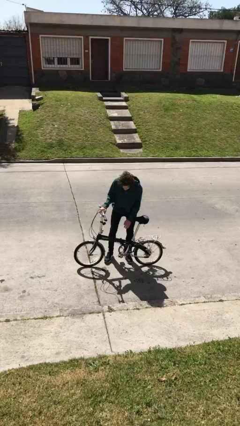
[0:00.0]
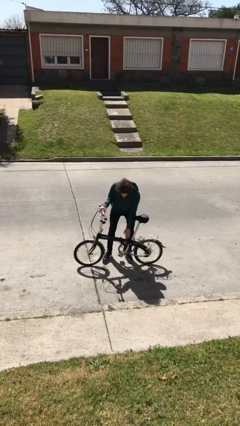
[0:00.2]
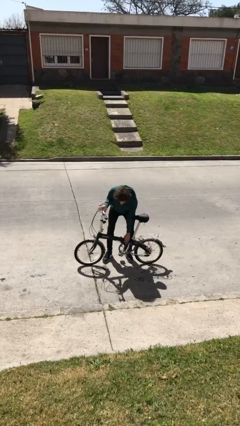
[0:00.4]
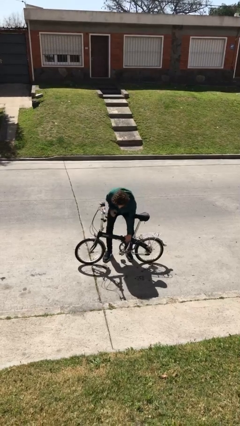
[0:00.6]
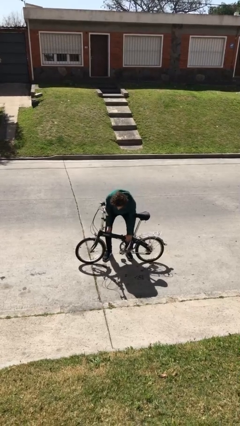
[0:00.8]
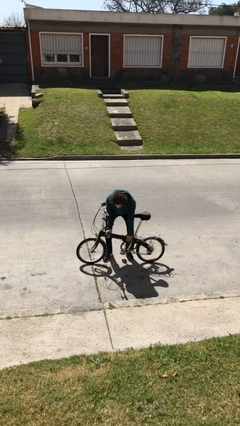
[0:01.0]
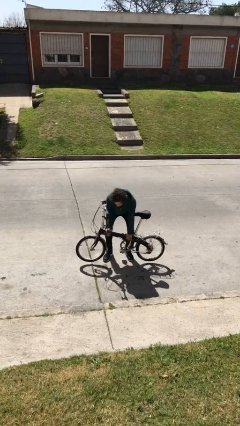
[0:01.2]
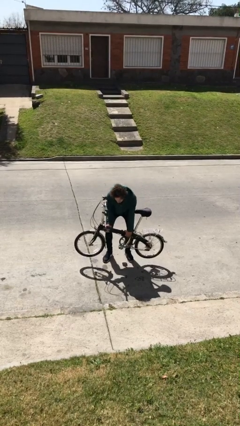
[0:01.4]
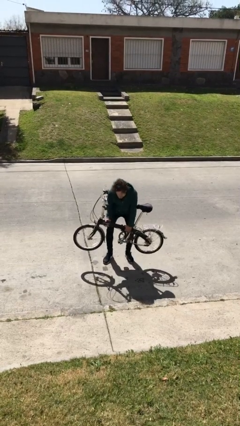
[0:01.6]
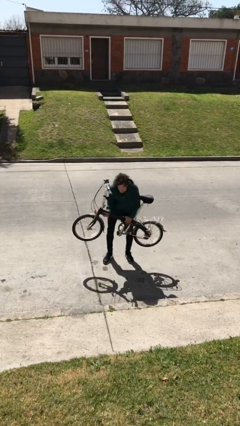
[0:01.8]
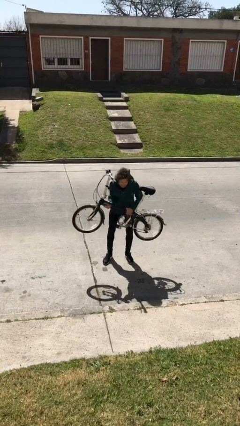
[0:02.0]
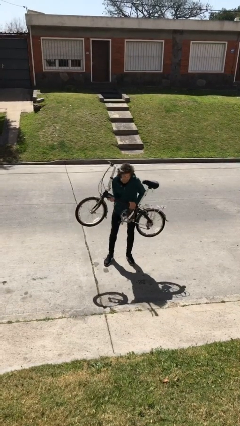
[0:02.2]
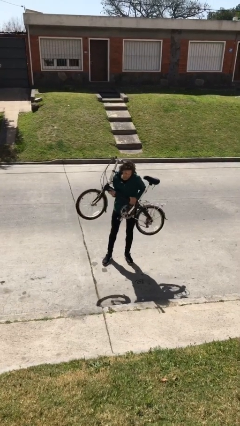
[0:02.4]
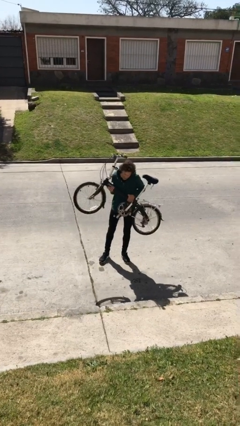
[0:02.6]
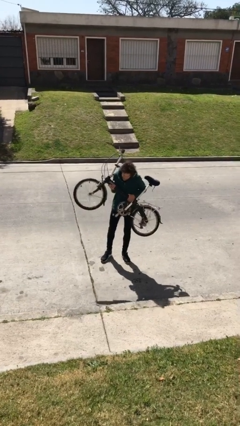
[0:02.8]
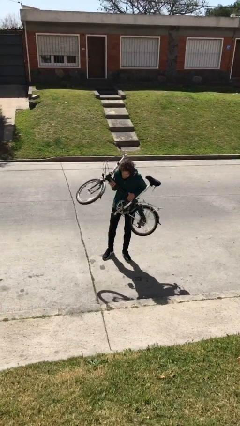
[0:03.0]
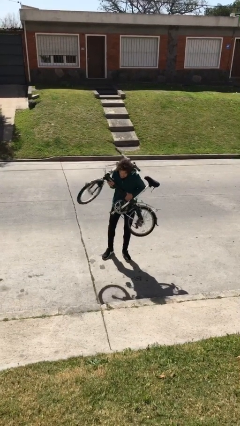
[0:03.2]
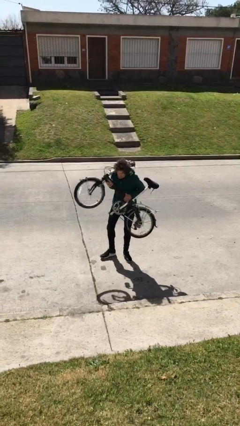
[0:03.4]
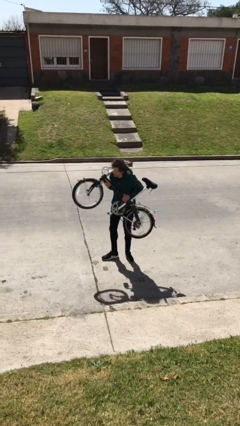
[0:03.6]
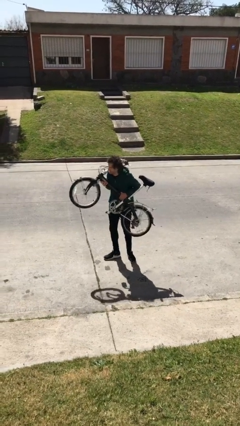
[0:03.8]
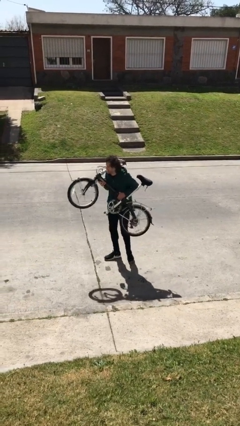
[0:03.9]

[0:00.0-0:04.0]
person picks up object from floor

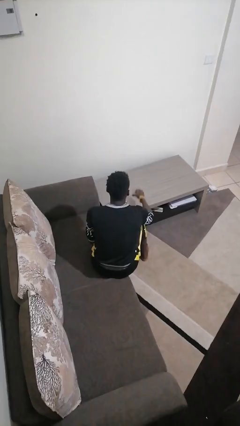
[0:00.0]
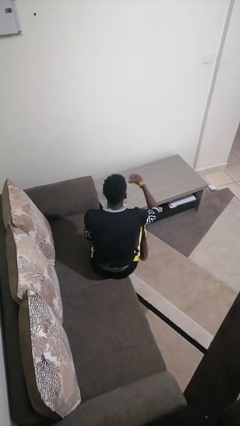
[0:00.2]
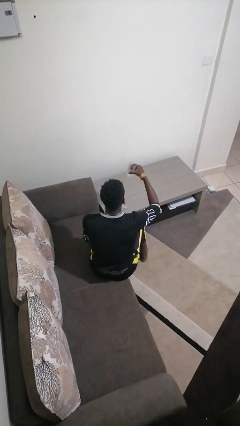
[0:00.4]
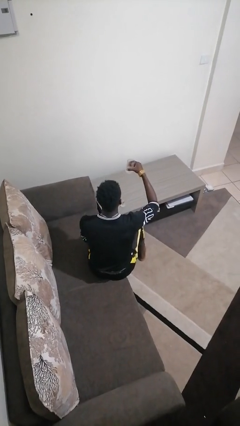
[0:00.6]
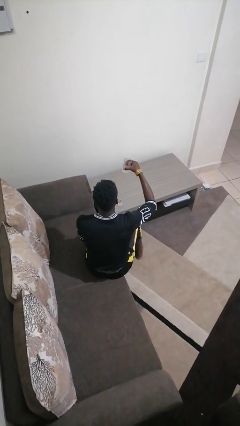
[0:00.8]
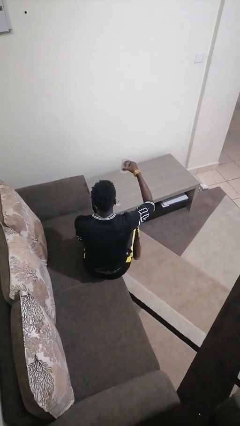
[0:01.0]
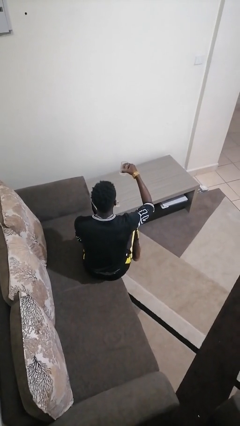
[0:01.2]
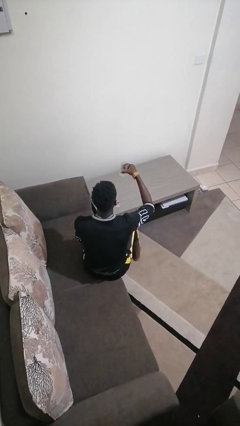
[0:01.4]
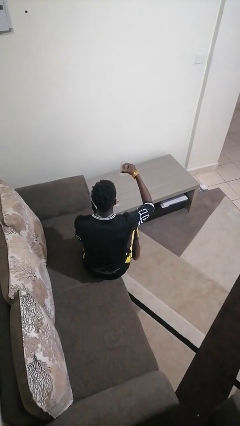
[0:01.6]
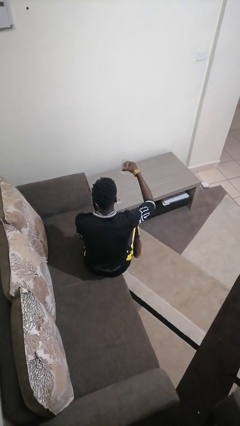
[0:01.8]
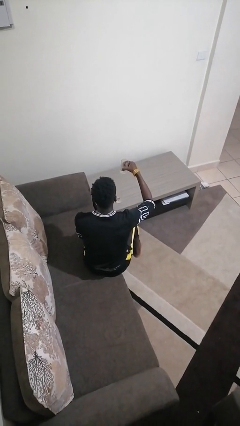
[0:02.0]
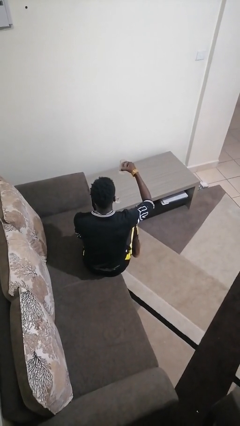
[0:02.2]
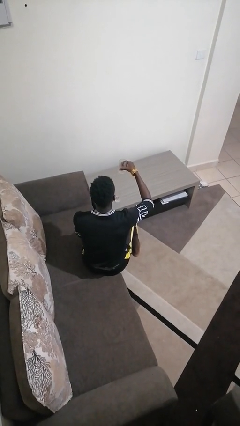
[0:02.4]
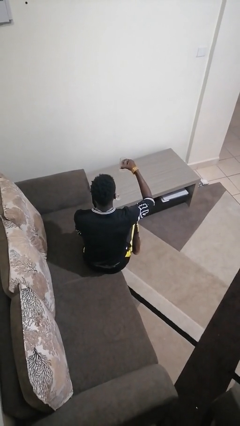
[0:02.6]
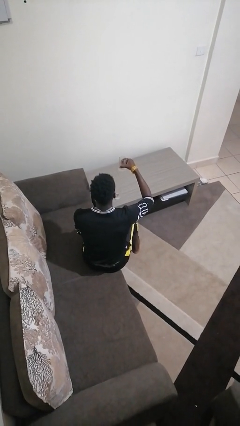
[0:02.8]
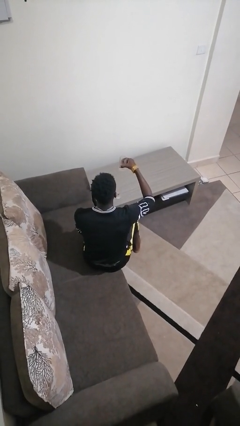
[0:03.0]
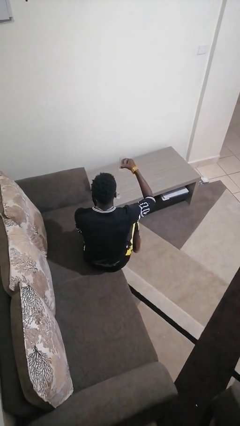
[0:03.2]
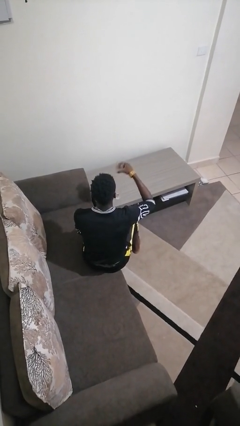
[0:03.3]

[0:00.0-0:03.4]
person picks up object from table

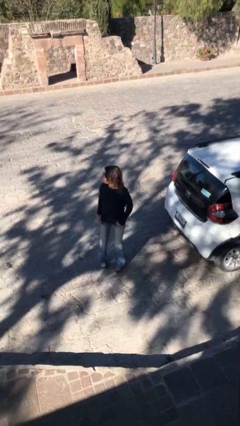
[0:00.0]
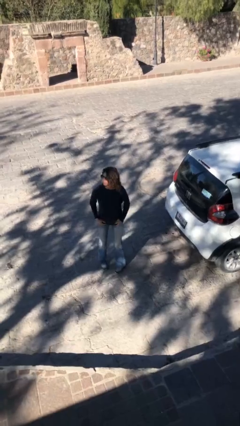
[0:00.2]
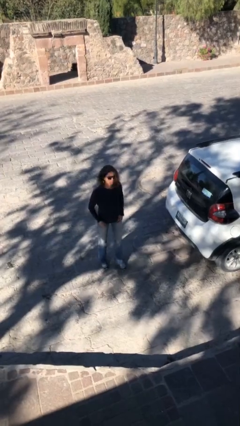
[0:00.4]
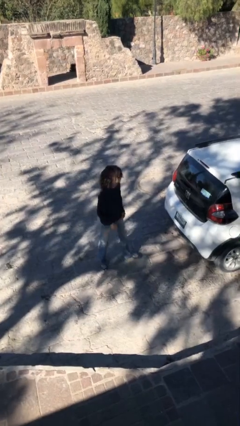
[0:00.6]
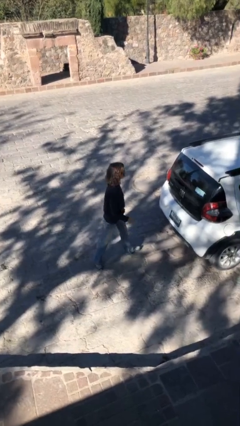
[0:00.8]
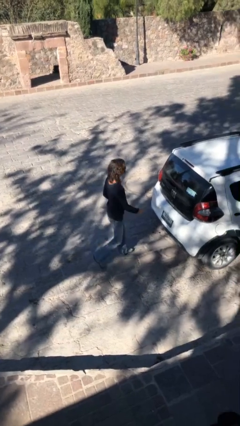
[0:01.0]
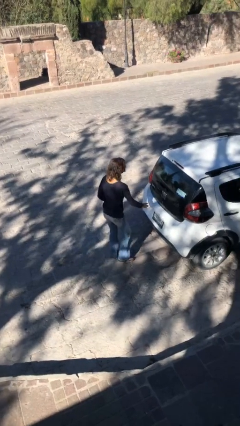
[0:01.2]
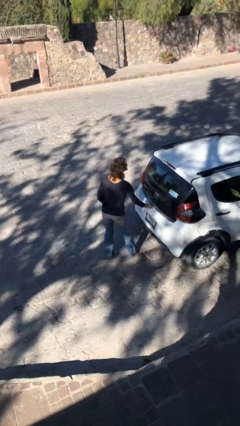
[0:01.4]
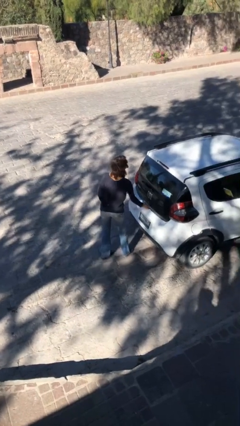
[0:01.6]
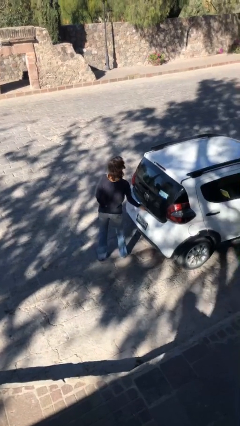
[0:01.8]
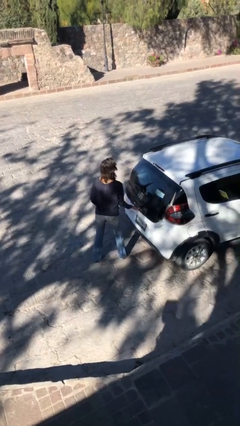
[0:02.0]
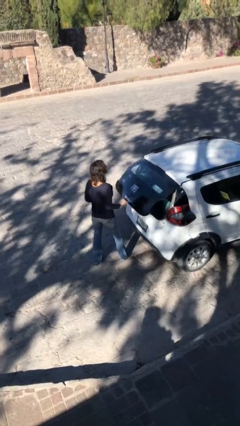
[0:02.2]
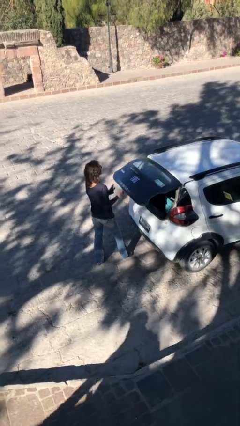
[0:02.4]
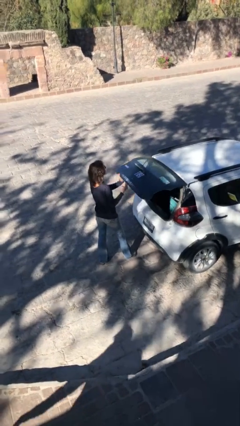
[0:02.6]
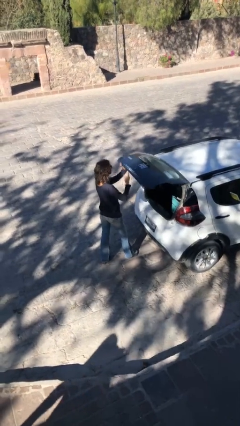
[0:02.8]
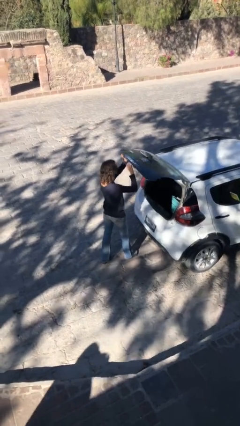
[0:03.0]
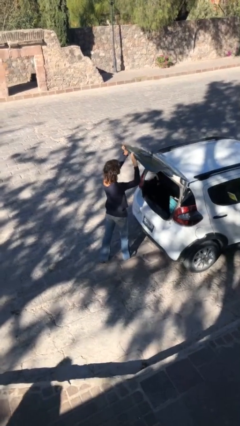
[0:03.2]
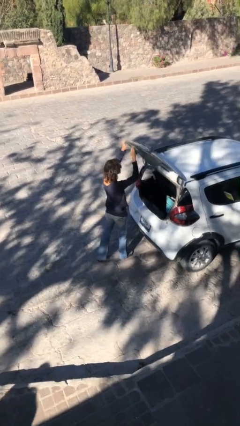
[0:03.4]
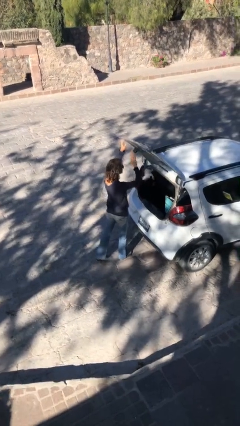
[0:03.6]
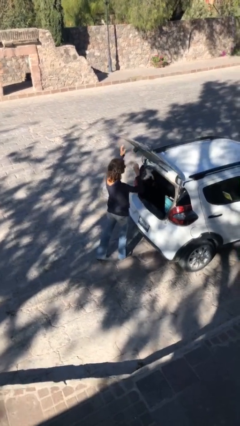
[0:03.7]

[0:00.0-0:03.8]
person opens car trunk

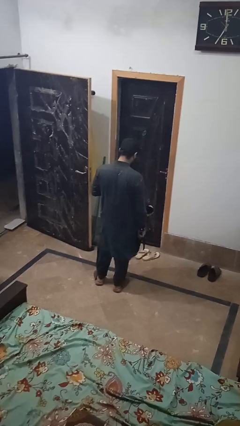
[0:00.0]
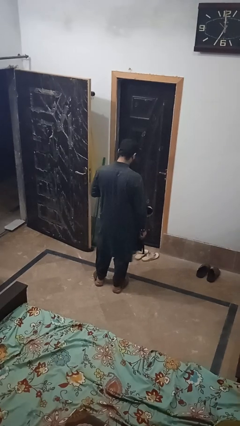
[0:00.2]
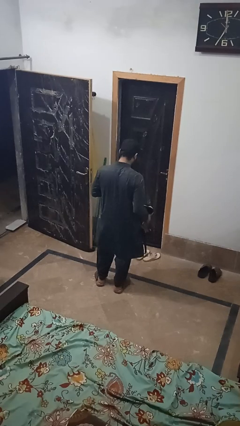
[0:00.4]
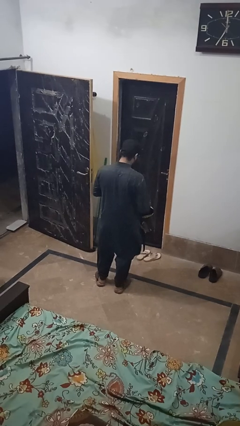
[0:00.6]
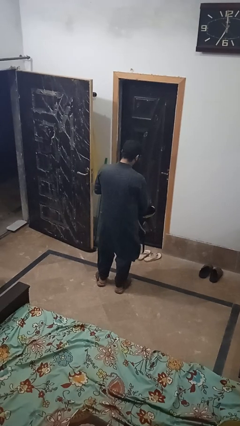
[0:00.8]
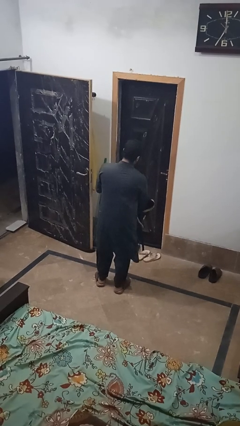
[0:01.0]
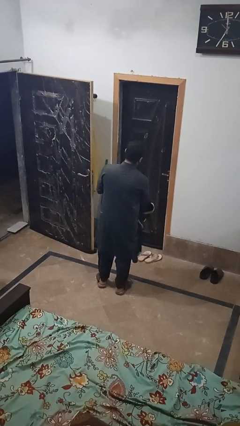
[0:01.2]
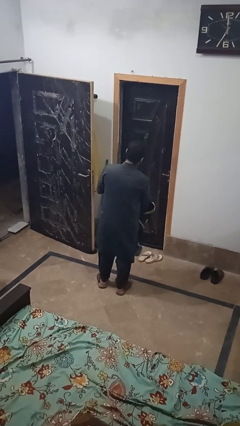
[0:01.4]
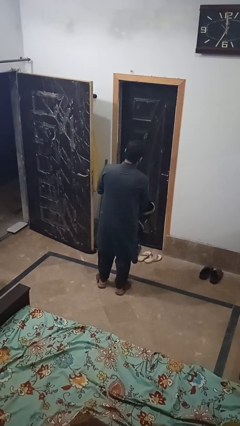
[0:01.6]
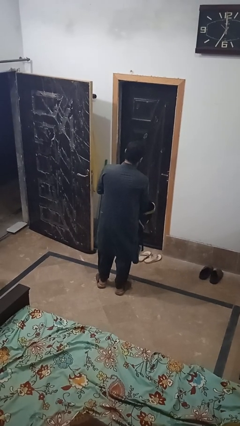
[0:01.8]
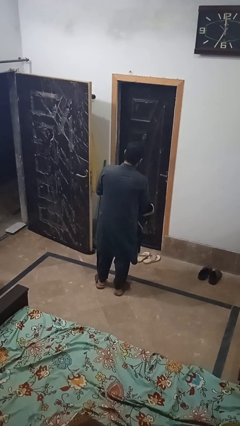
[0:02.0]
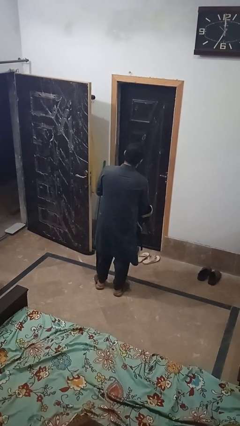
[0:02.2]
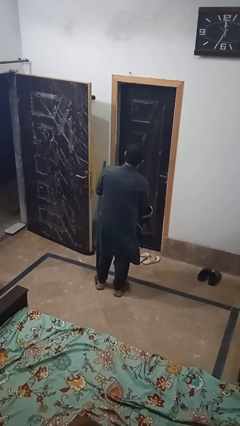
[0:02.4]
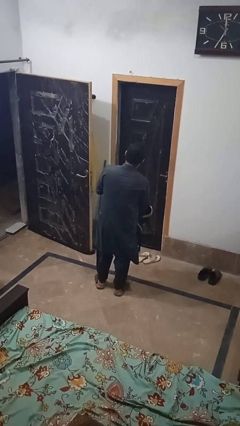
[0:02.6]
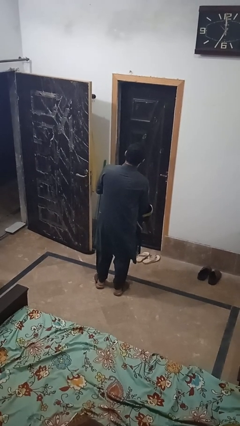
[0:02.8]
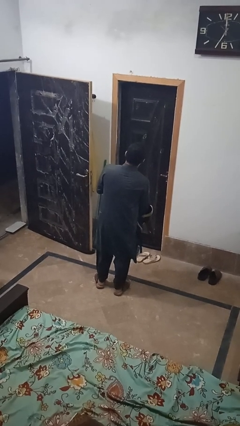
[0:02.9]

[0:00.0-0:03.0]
person searches in bag

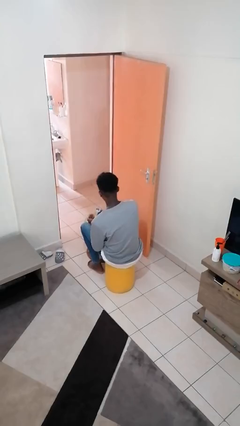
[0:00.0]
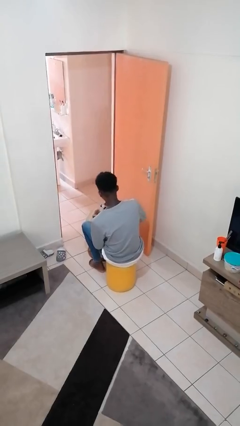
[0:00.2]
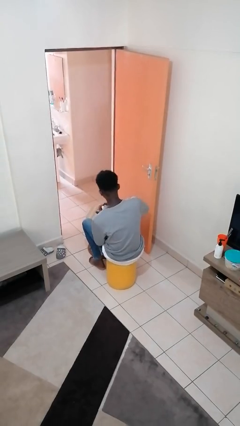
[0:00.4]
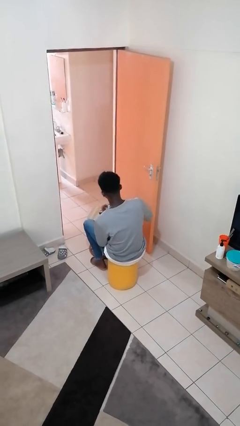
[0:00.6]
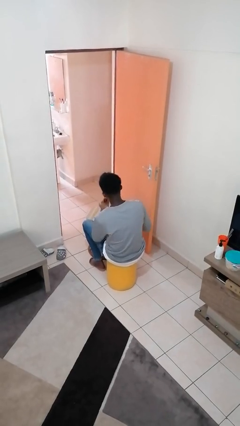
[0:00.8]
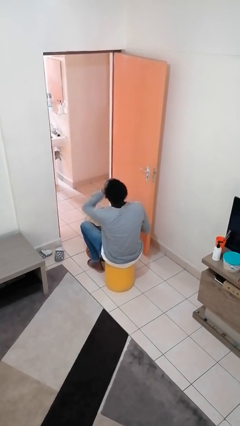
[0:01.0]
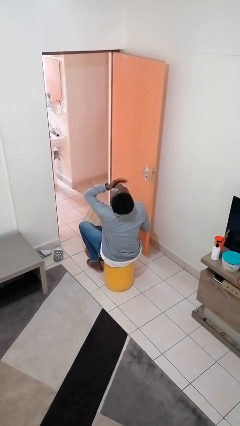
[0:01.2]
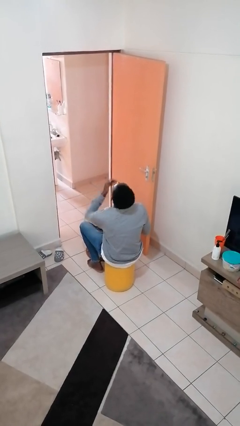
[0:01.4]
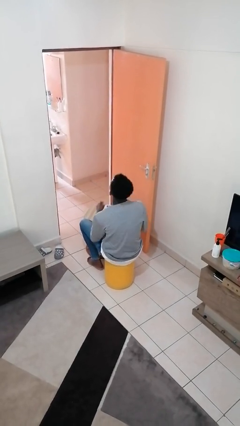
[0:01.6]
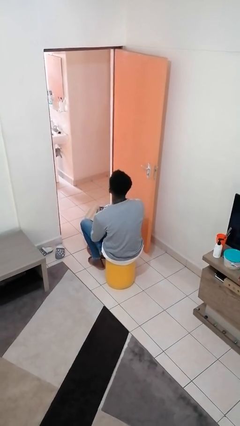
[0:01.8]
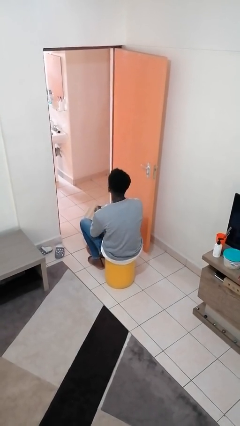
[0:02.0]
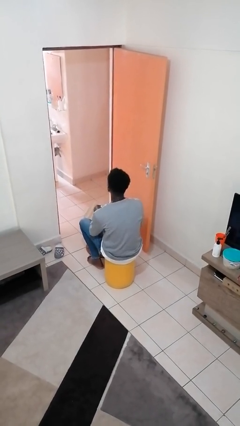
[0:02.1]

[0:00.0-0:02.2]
person takes medicine pills

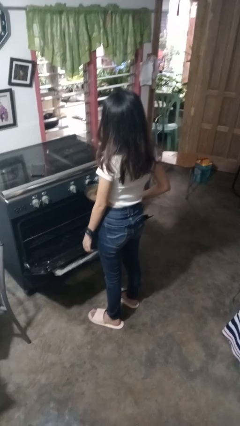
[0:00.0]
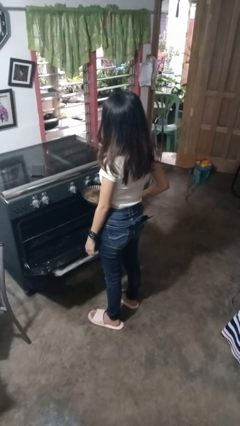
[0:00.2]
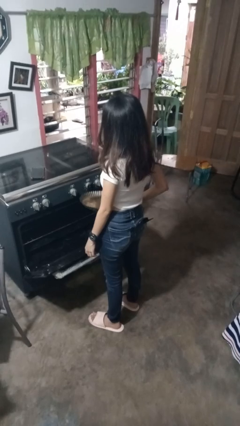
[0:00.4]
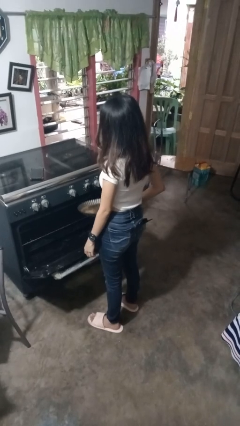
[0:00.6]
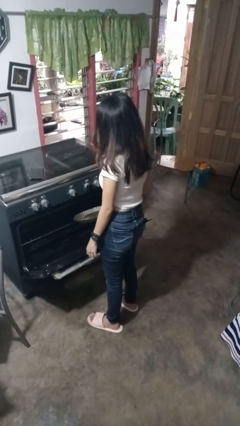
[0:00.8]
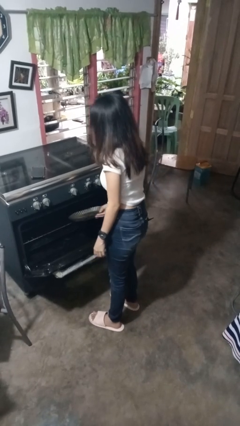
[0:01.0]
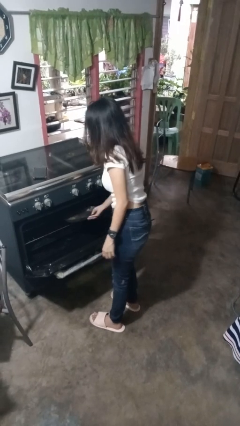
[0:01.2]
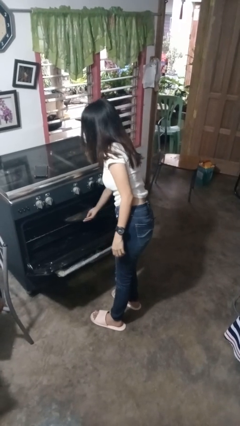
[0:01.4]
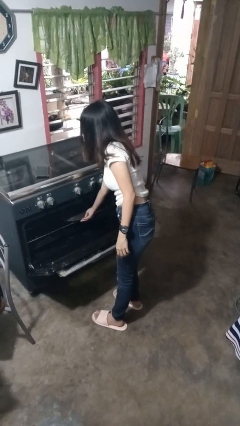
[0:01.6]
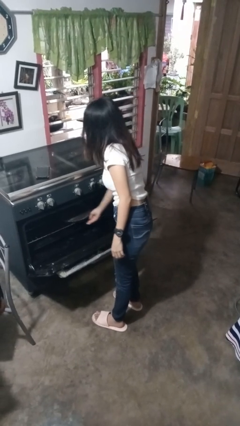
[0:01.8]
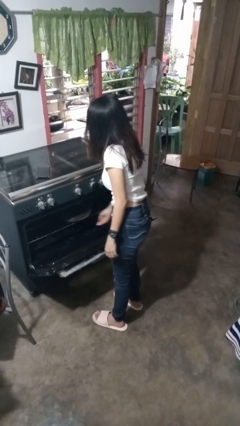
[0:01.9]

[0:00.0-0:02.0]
person puts object into oven
